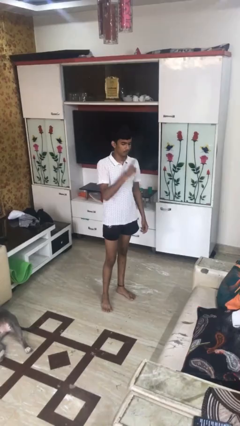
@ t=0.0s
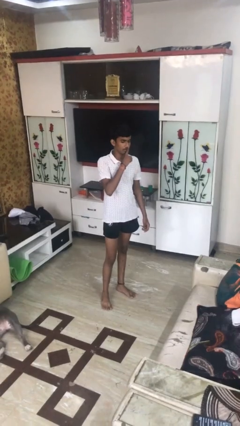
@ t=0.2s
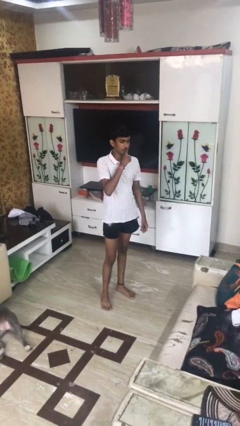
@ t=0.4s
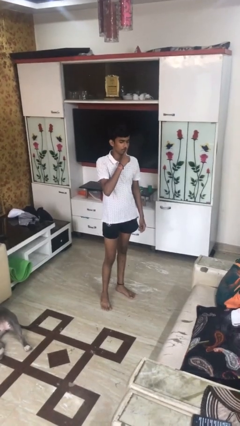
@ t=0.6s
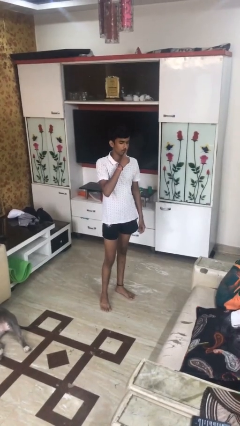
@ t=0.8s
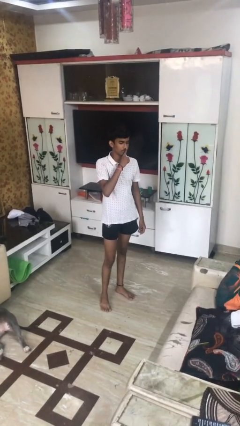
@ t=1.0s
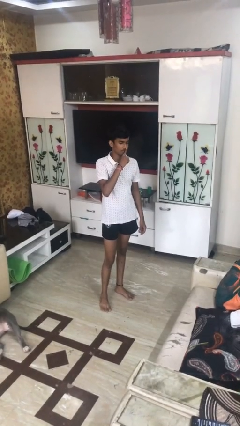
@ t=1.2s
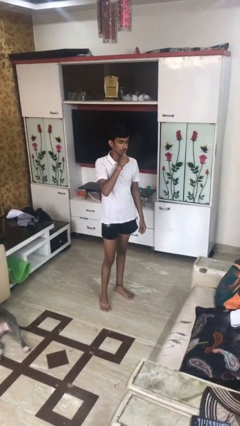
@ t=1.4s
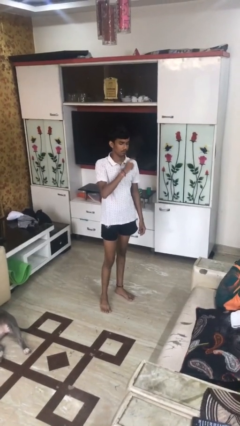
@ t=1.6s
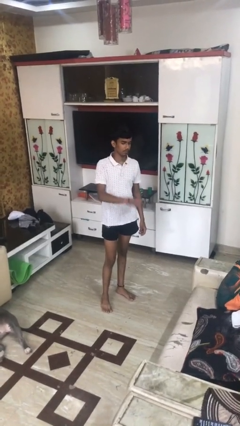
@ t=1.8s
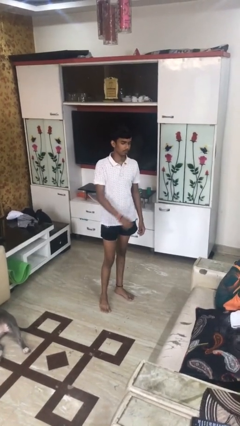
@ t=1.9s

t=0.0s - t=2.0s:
person gestures be quiet

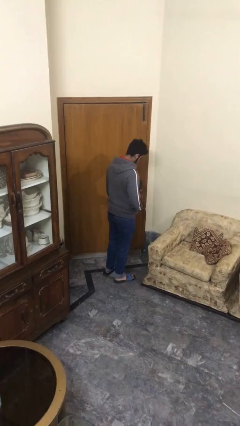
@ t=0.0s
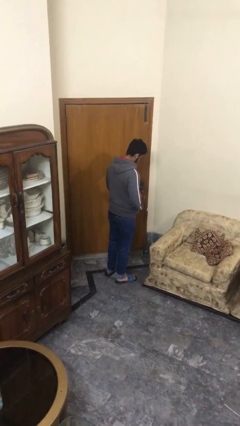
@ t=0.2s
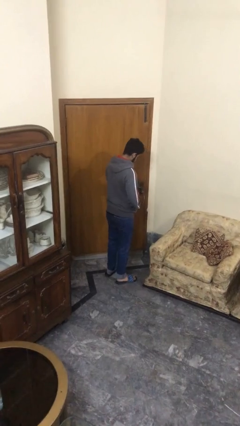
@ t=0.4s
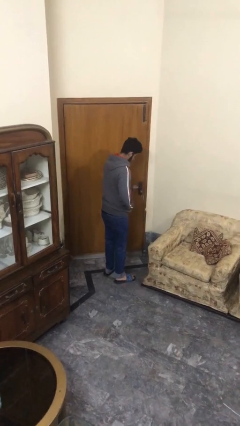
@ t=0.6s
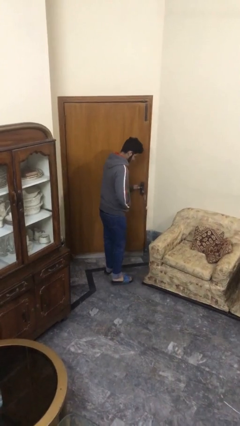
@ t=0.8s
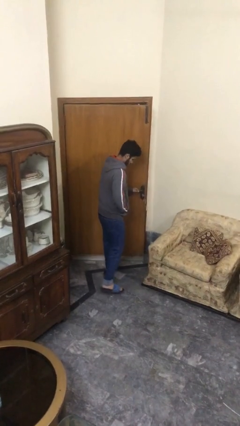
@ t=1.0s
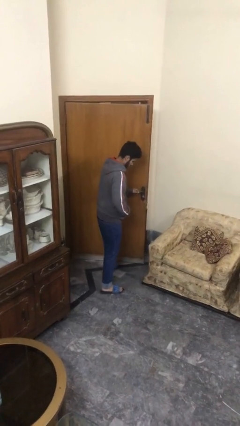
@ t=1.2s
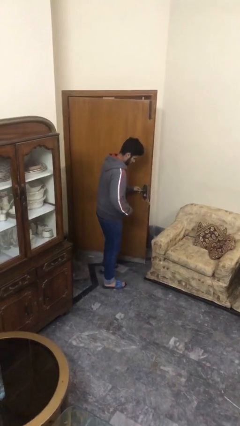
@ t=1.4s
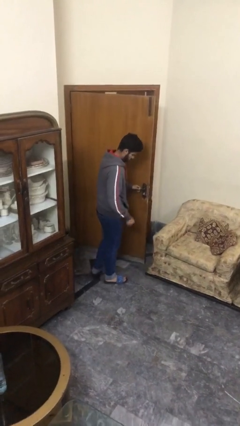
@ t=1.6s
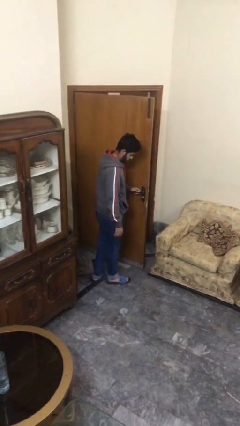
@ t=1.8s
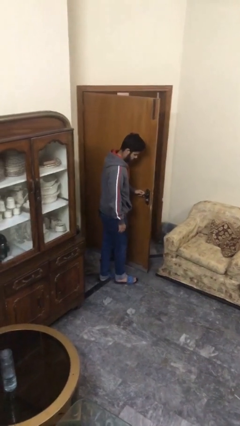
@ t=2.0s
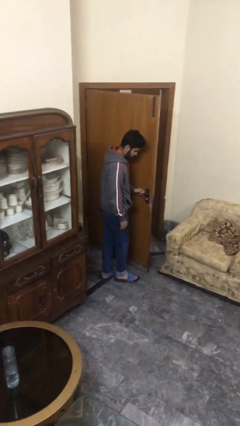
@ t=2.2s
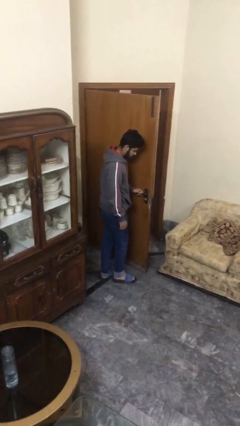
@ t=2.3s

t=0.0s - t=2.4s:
person opens facility door

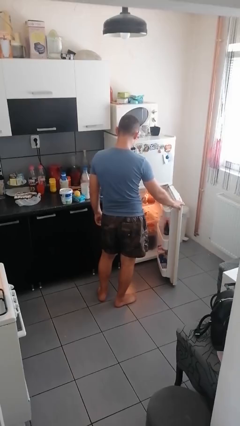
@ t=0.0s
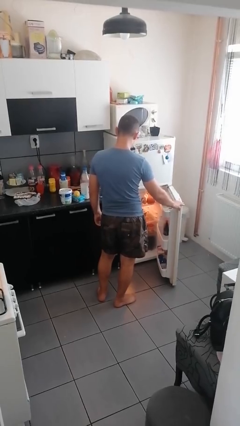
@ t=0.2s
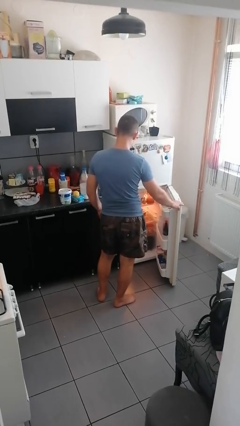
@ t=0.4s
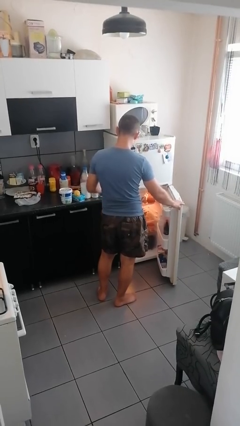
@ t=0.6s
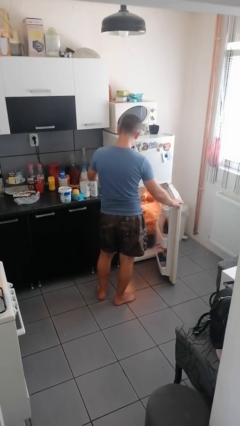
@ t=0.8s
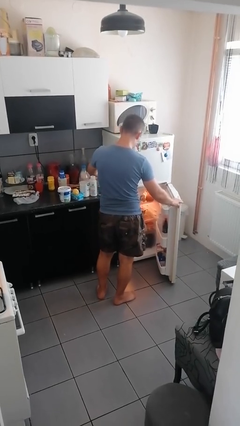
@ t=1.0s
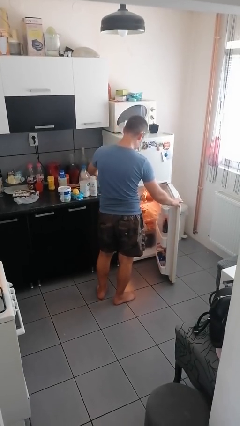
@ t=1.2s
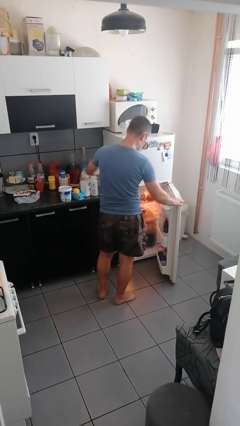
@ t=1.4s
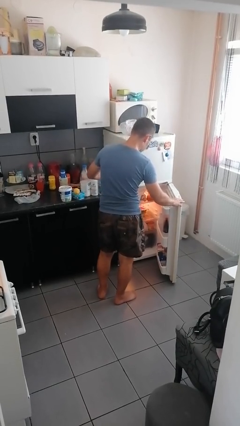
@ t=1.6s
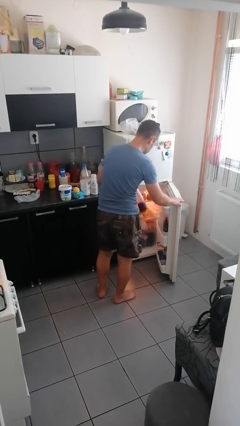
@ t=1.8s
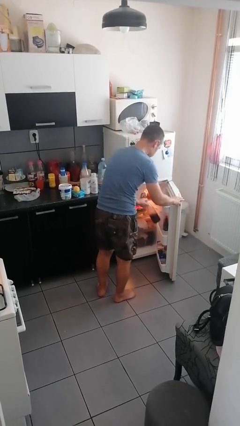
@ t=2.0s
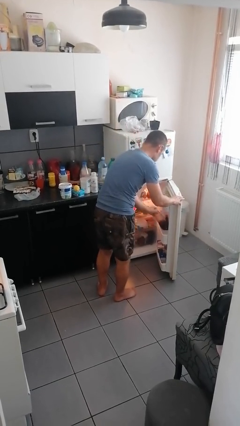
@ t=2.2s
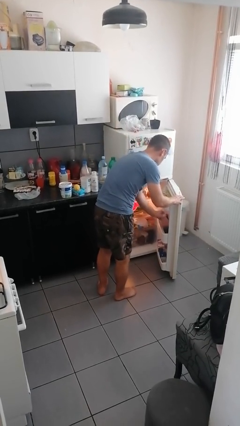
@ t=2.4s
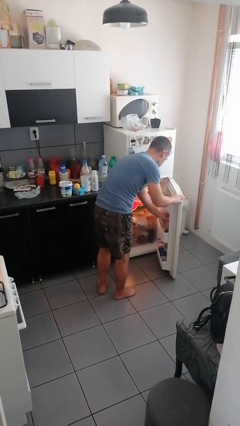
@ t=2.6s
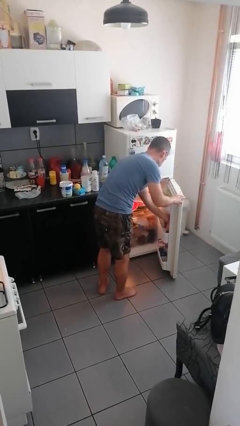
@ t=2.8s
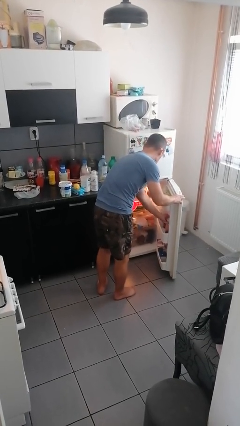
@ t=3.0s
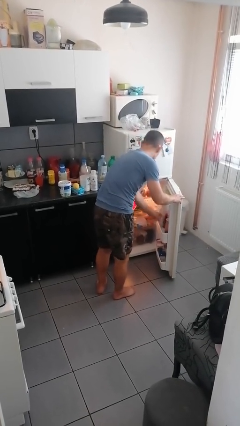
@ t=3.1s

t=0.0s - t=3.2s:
person loads groceries into refrigerator

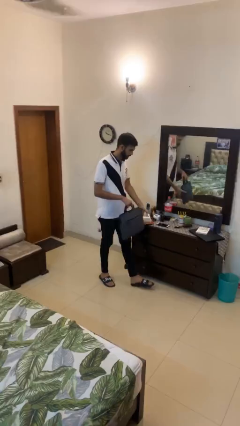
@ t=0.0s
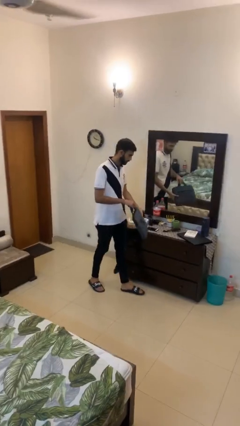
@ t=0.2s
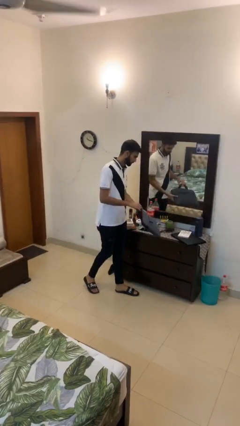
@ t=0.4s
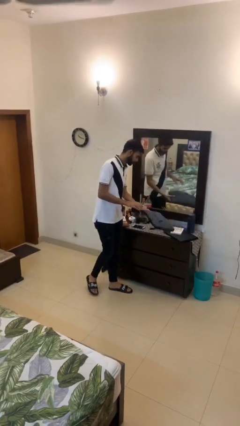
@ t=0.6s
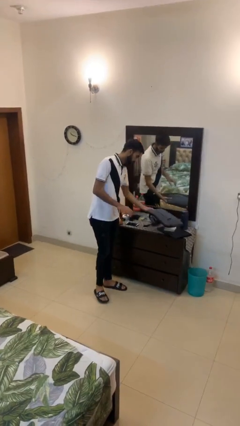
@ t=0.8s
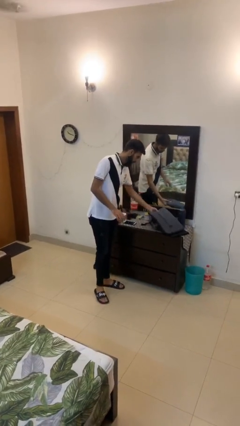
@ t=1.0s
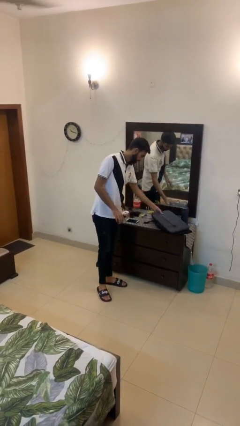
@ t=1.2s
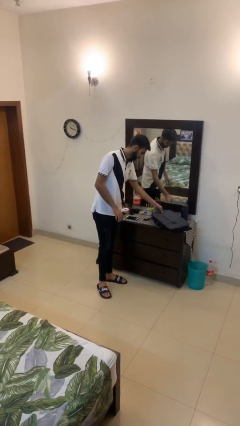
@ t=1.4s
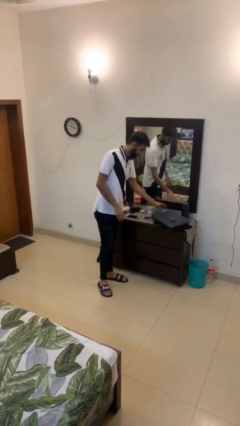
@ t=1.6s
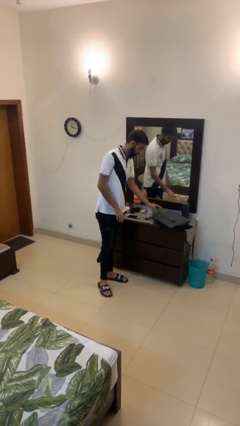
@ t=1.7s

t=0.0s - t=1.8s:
person puts down object on table

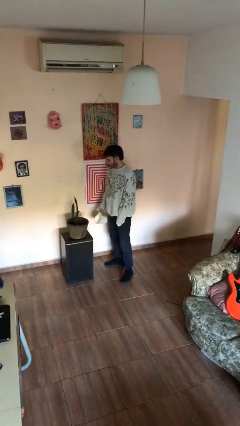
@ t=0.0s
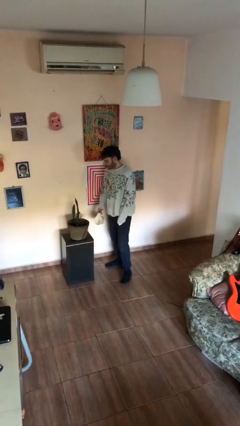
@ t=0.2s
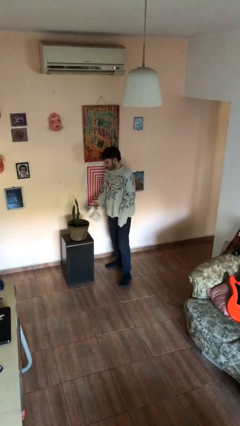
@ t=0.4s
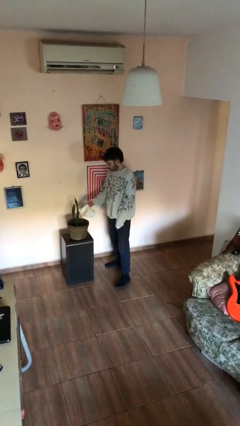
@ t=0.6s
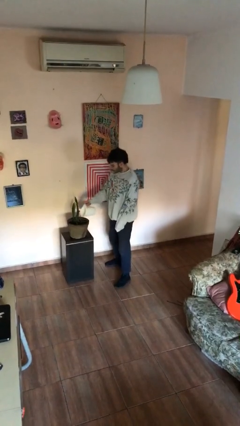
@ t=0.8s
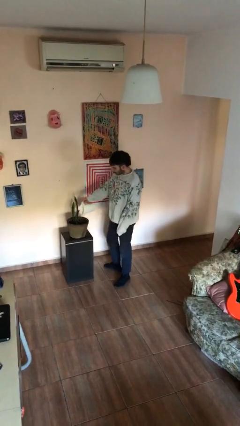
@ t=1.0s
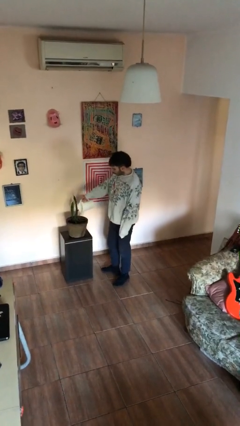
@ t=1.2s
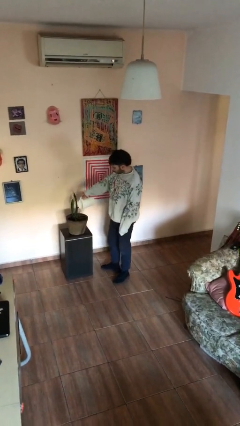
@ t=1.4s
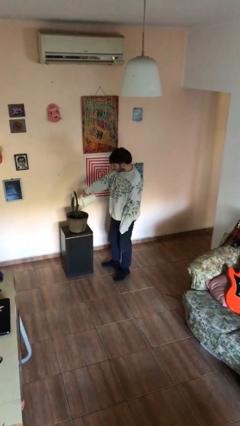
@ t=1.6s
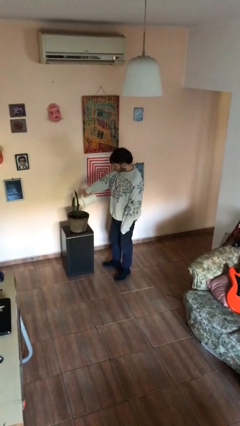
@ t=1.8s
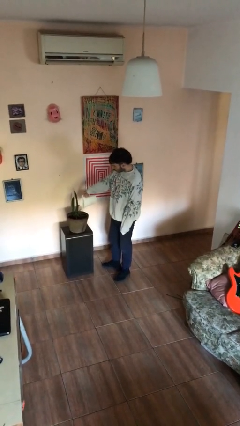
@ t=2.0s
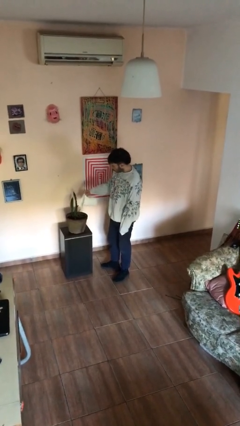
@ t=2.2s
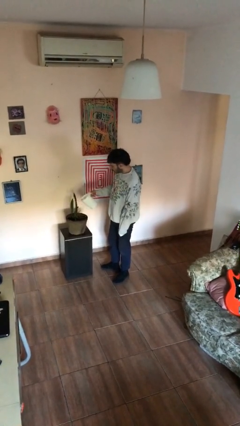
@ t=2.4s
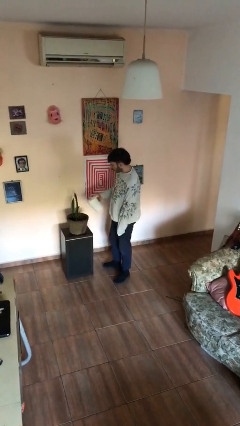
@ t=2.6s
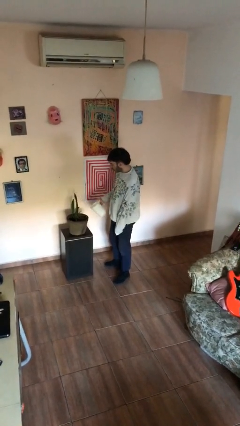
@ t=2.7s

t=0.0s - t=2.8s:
person waters houseplant

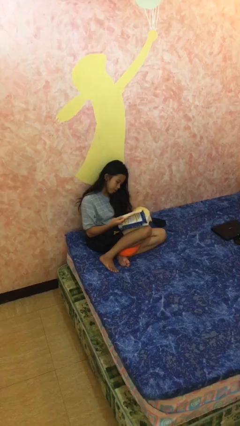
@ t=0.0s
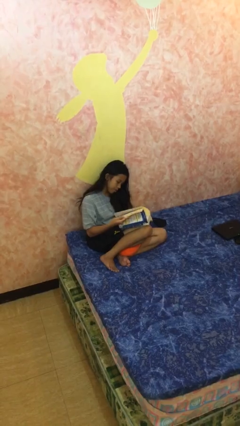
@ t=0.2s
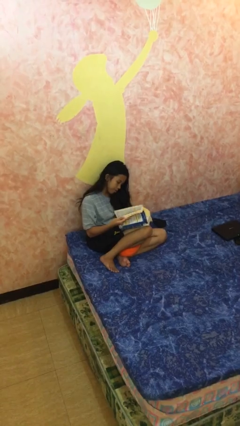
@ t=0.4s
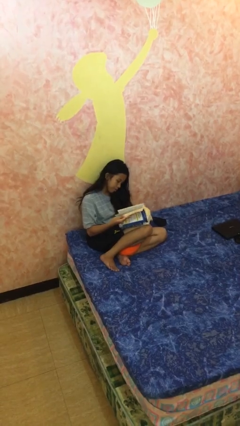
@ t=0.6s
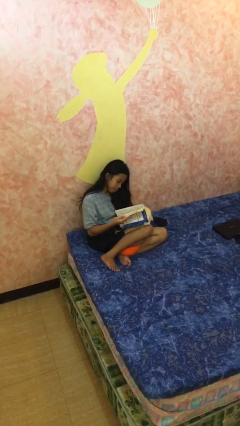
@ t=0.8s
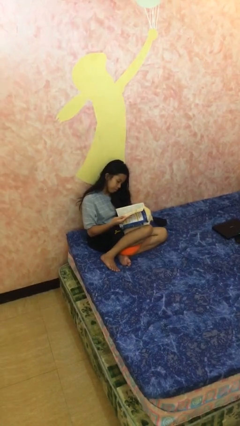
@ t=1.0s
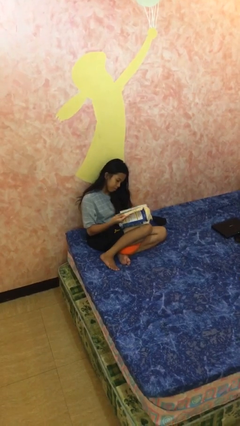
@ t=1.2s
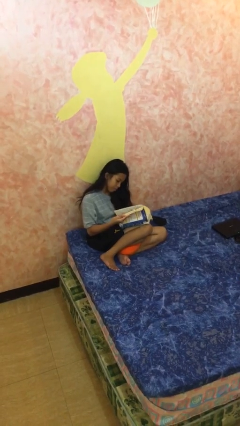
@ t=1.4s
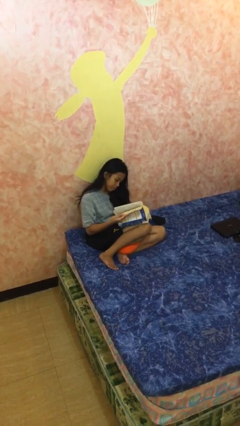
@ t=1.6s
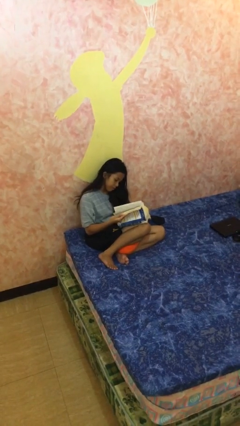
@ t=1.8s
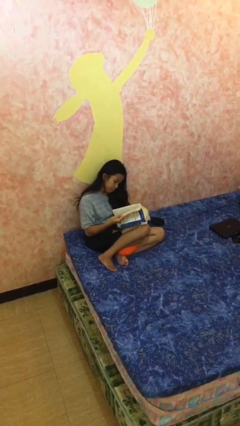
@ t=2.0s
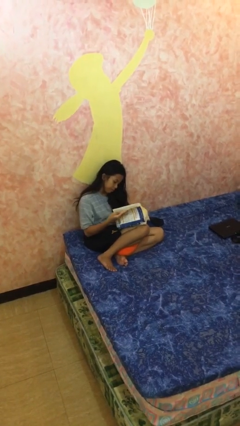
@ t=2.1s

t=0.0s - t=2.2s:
person reads document

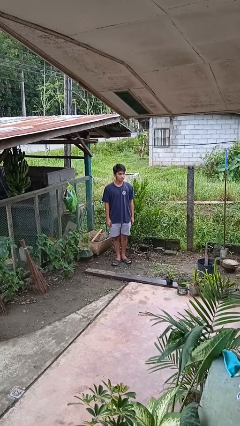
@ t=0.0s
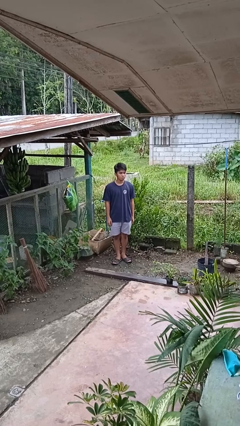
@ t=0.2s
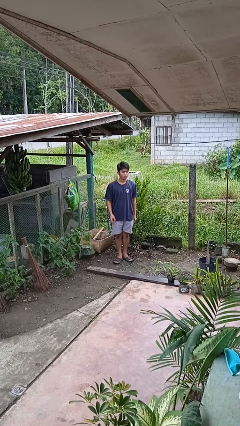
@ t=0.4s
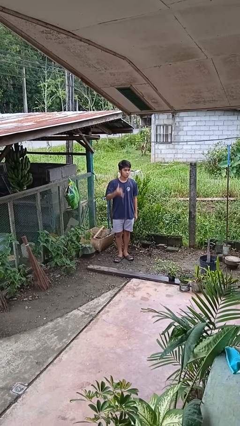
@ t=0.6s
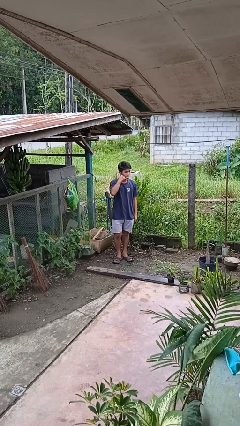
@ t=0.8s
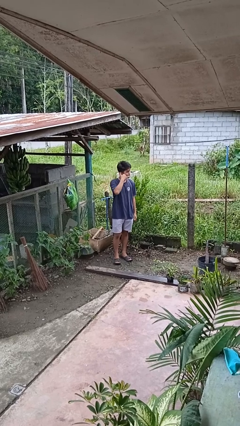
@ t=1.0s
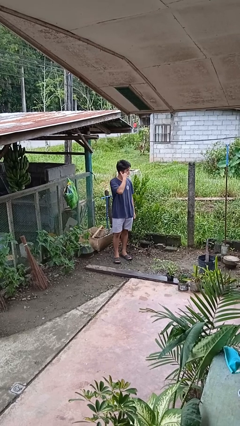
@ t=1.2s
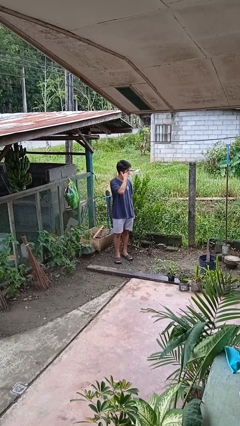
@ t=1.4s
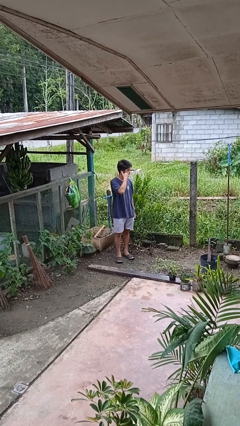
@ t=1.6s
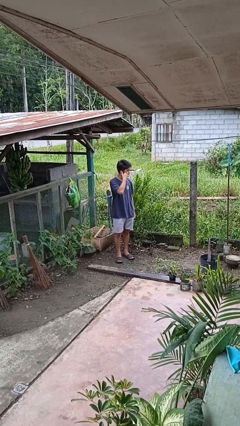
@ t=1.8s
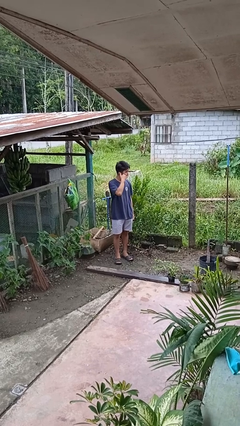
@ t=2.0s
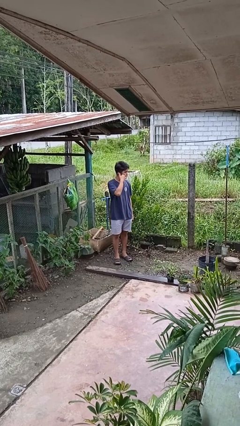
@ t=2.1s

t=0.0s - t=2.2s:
person gestures call me

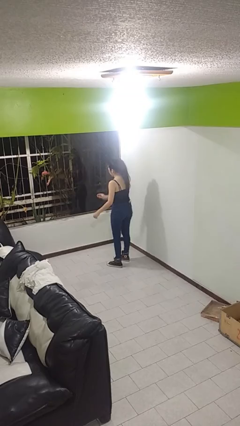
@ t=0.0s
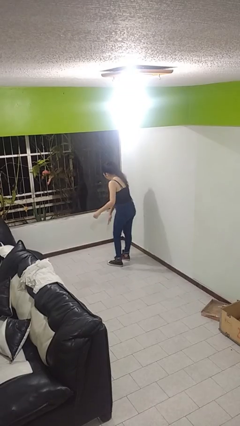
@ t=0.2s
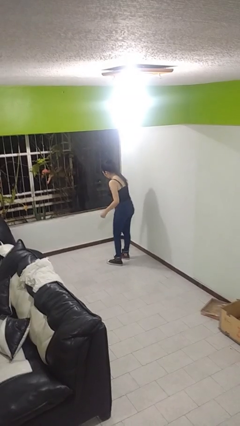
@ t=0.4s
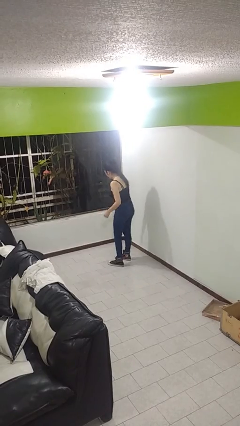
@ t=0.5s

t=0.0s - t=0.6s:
person swats bug
